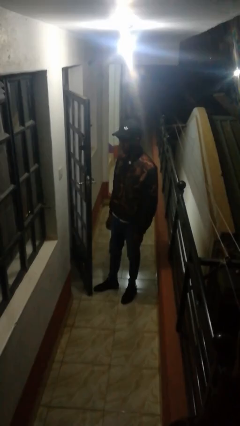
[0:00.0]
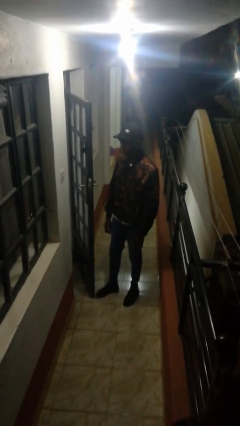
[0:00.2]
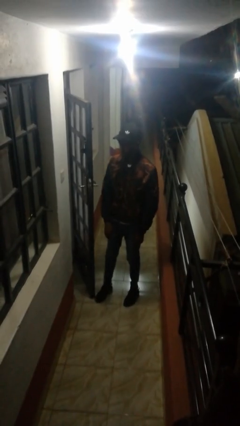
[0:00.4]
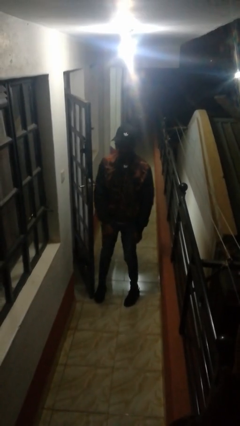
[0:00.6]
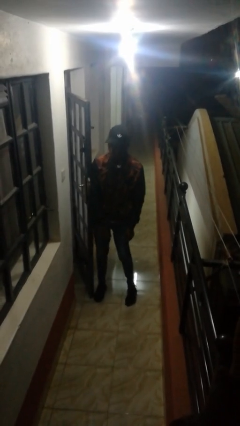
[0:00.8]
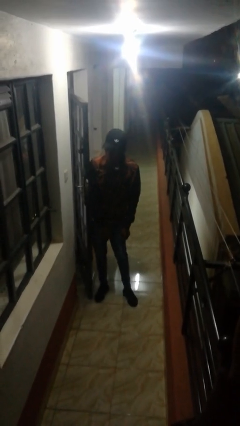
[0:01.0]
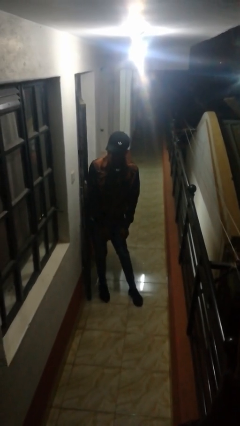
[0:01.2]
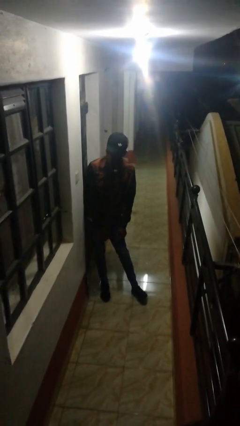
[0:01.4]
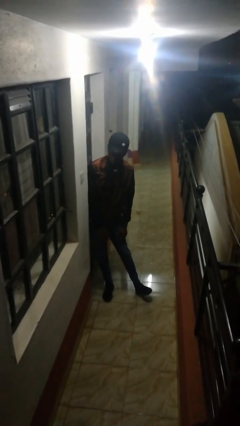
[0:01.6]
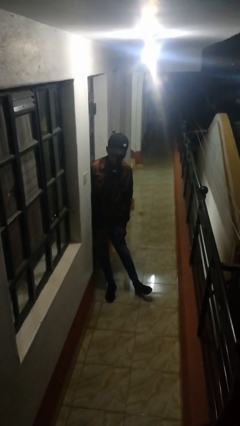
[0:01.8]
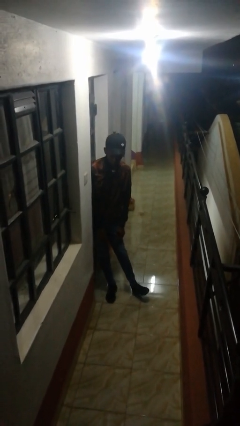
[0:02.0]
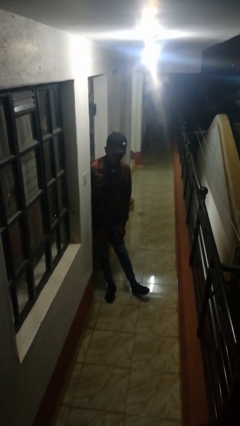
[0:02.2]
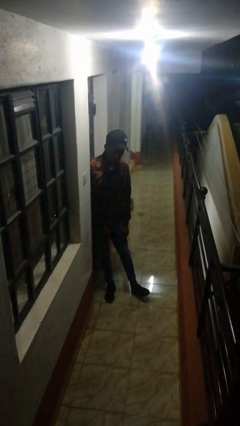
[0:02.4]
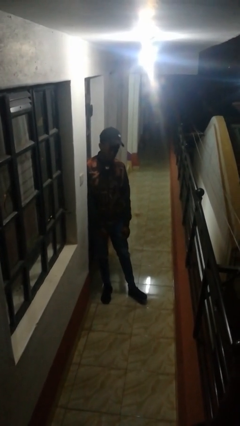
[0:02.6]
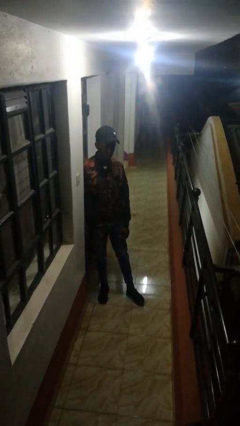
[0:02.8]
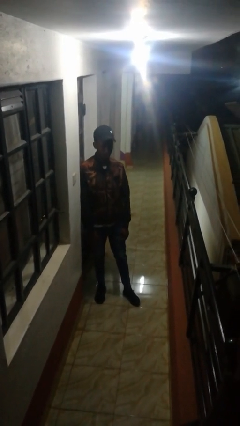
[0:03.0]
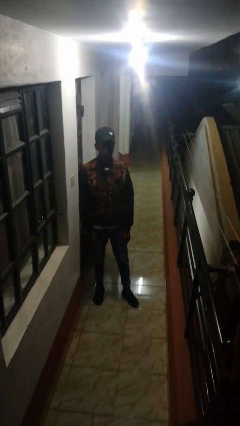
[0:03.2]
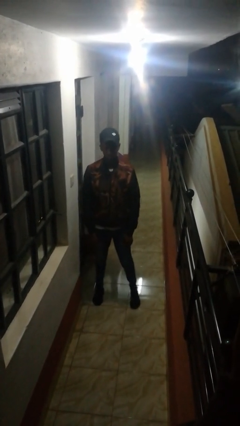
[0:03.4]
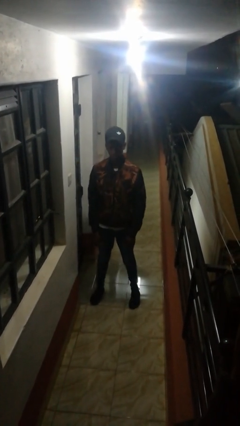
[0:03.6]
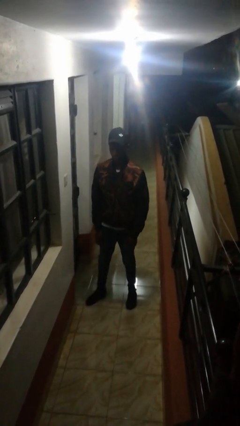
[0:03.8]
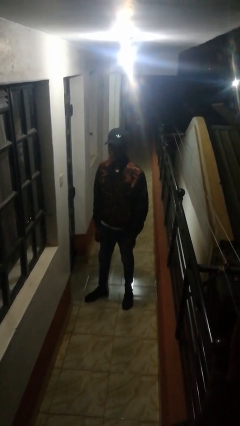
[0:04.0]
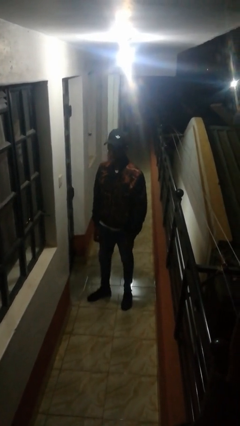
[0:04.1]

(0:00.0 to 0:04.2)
person closes door with hip

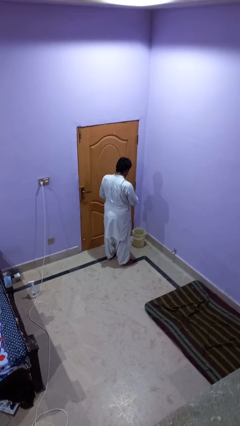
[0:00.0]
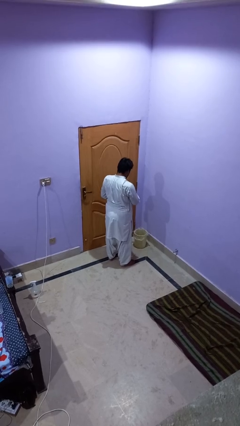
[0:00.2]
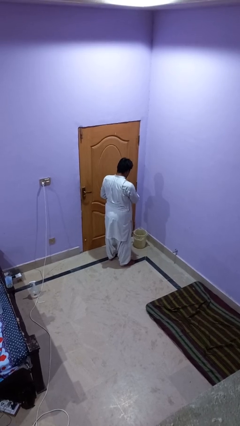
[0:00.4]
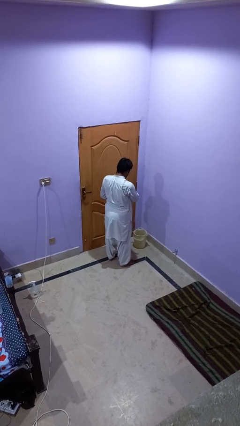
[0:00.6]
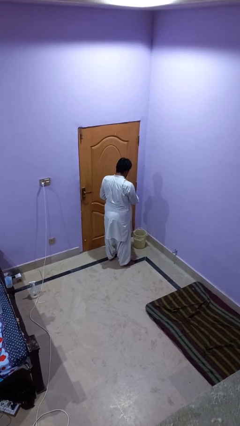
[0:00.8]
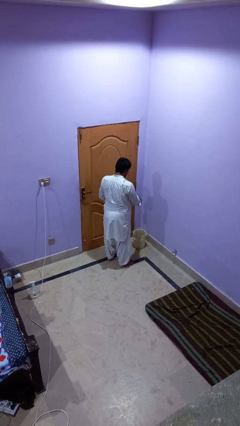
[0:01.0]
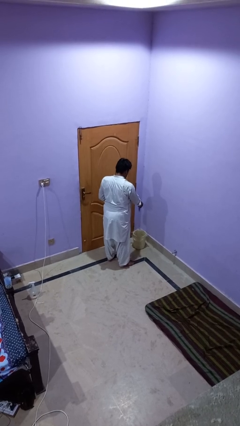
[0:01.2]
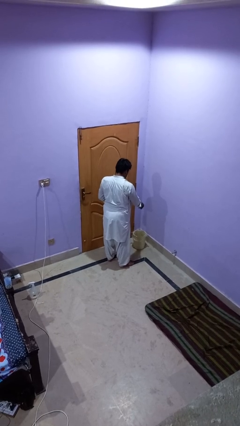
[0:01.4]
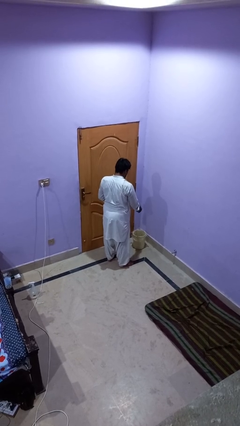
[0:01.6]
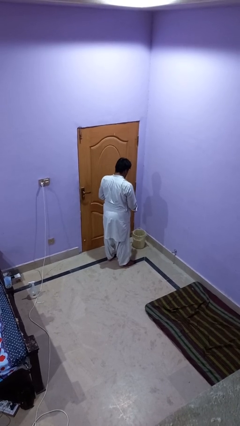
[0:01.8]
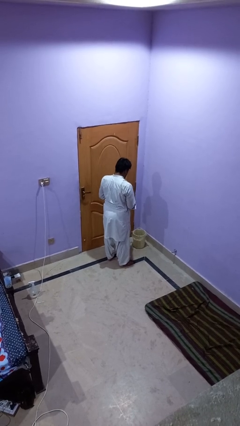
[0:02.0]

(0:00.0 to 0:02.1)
person discards trash

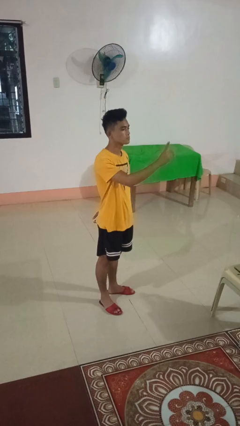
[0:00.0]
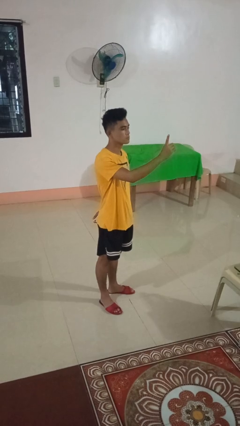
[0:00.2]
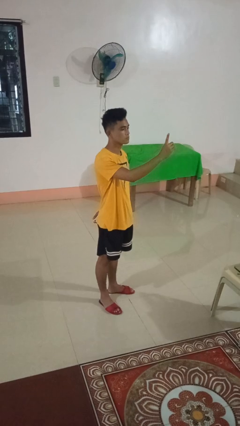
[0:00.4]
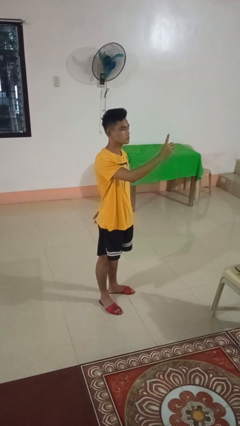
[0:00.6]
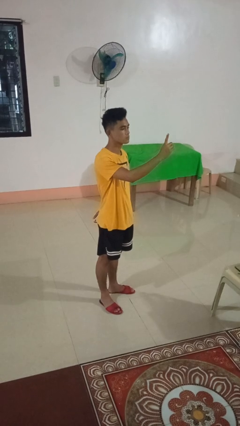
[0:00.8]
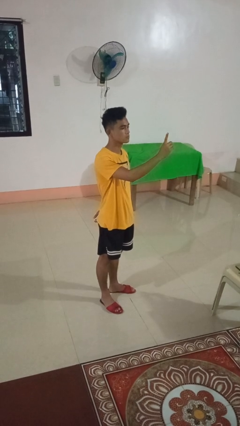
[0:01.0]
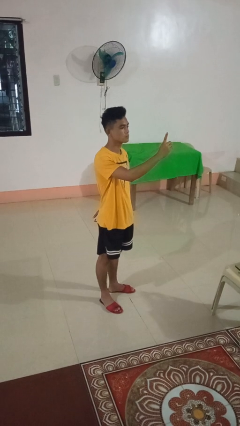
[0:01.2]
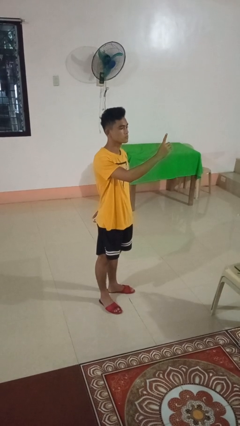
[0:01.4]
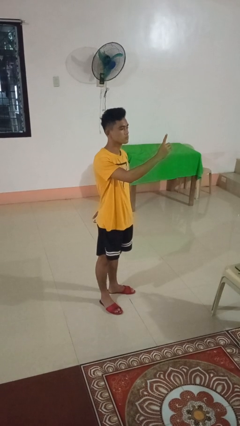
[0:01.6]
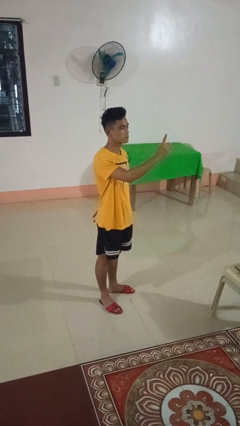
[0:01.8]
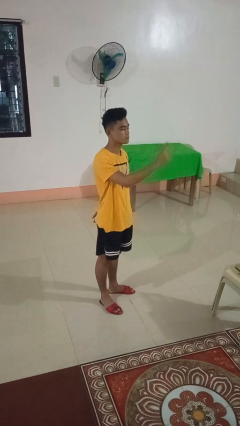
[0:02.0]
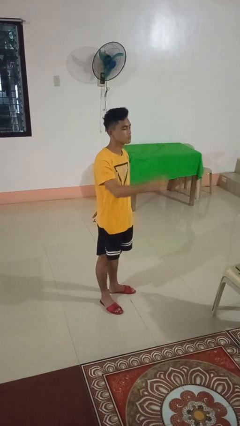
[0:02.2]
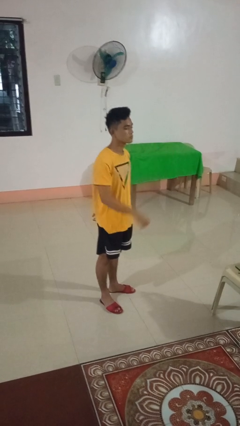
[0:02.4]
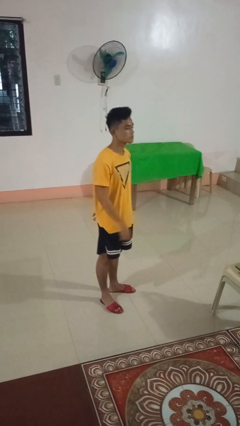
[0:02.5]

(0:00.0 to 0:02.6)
person gestures number one

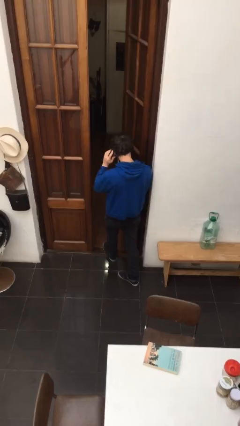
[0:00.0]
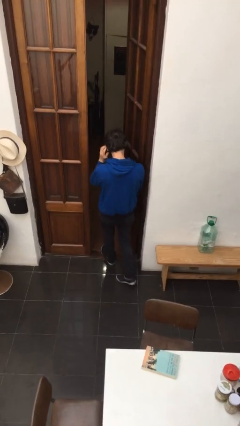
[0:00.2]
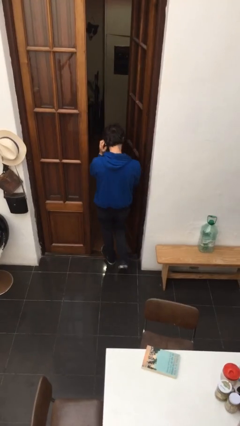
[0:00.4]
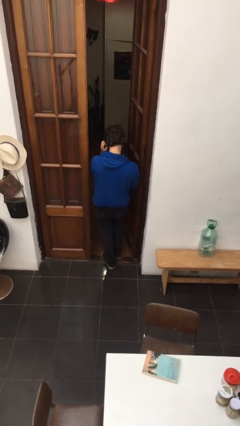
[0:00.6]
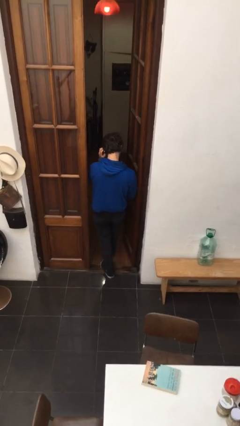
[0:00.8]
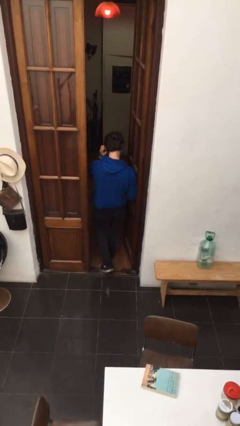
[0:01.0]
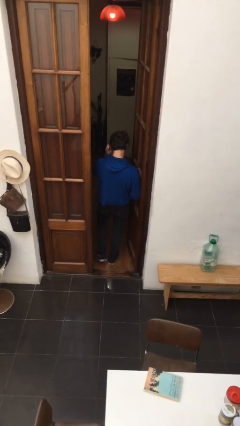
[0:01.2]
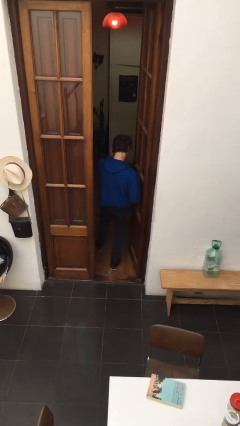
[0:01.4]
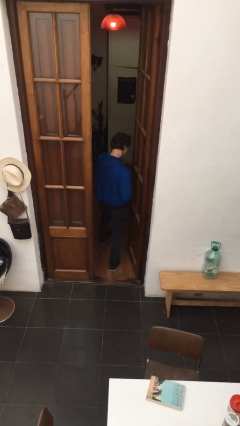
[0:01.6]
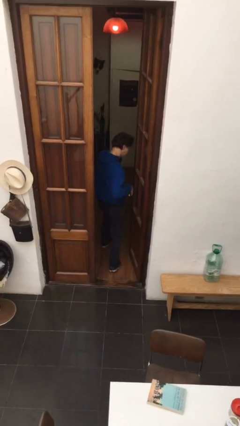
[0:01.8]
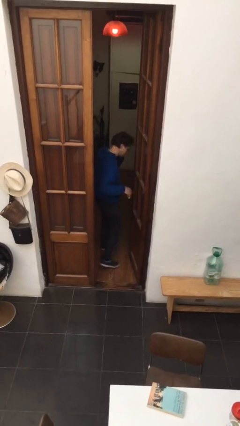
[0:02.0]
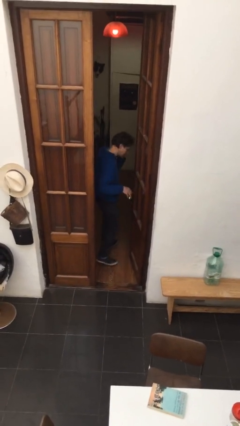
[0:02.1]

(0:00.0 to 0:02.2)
person exits scene through structure

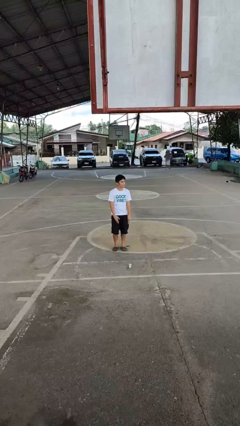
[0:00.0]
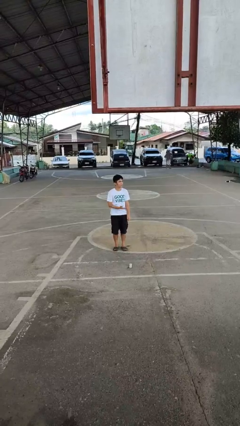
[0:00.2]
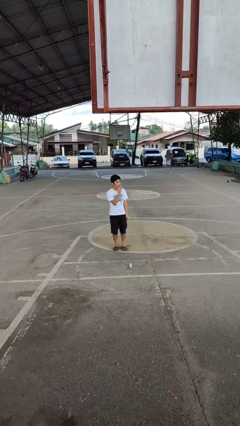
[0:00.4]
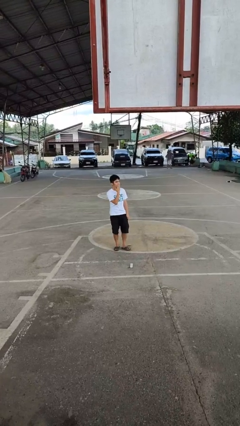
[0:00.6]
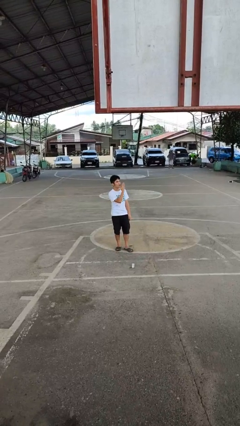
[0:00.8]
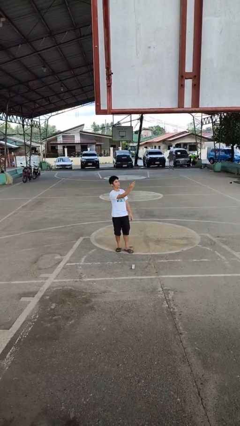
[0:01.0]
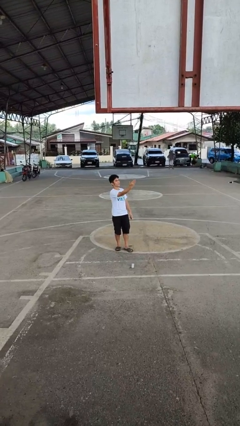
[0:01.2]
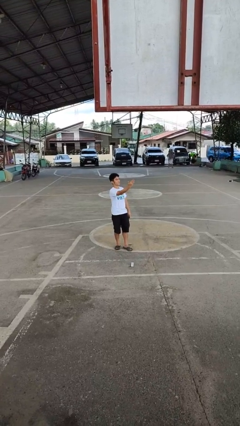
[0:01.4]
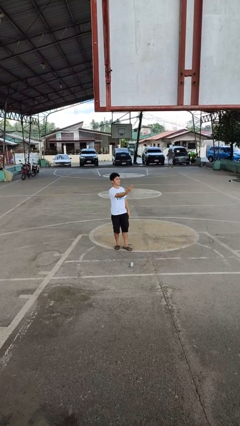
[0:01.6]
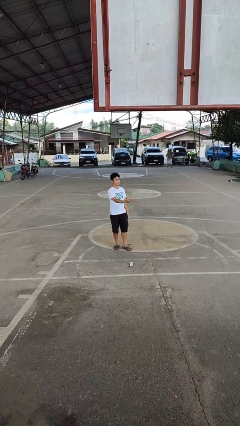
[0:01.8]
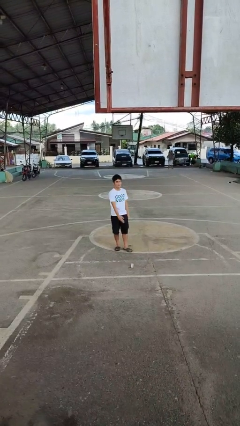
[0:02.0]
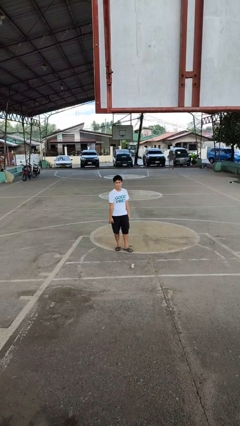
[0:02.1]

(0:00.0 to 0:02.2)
person gestures blow kiss

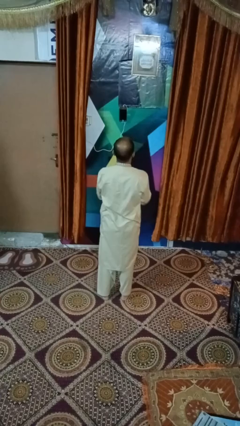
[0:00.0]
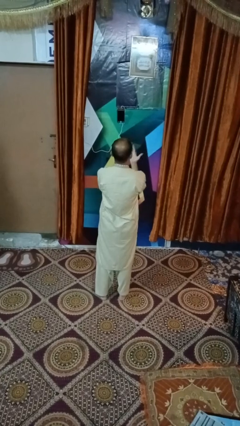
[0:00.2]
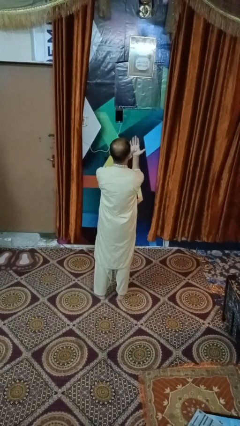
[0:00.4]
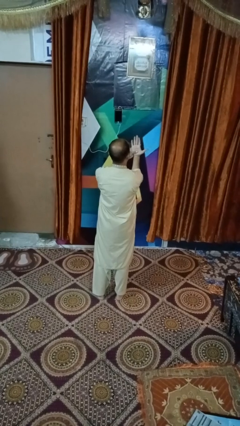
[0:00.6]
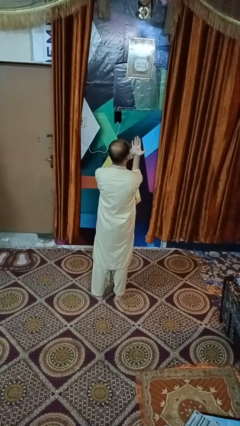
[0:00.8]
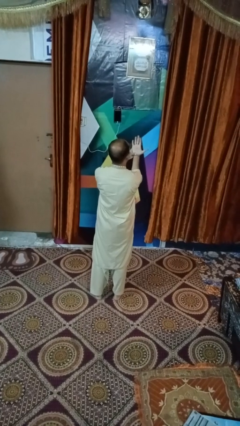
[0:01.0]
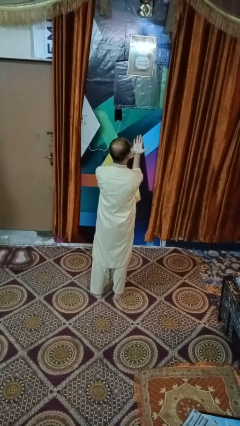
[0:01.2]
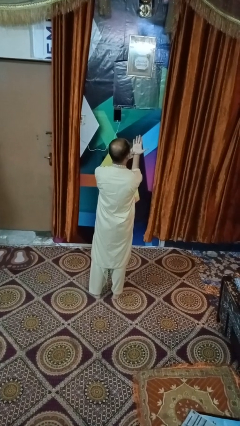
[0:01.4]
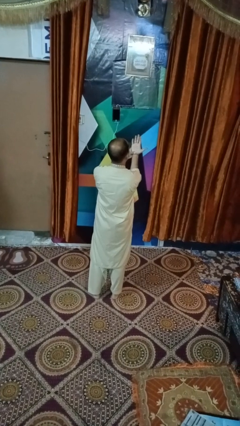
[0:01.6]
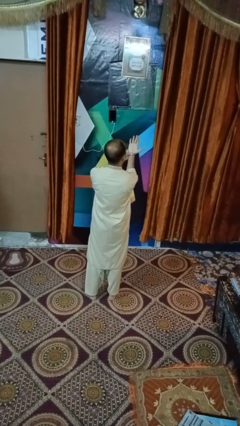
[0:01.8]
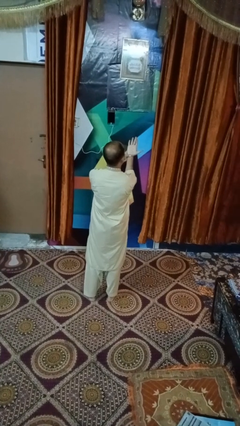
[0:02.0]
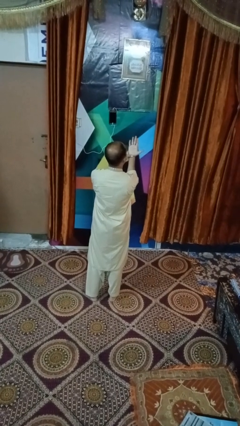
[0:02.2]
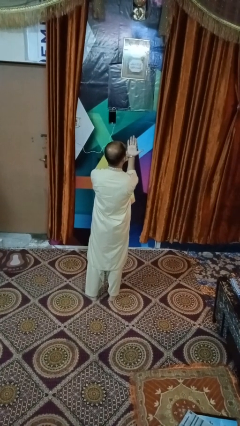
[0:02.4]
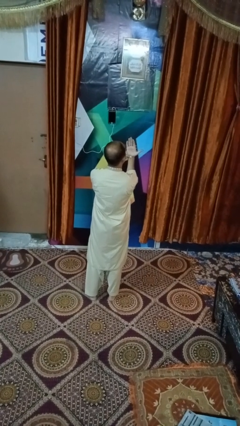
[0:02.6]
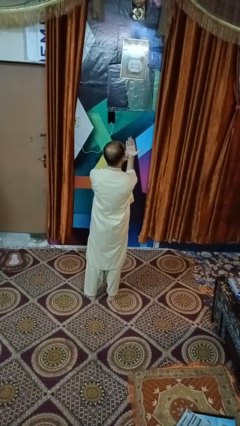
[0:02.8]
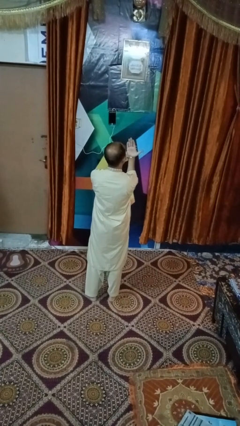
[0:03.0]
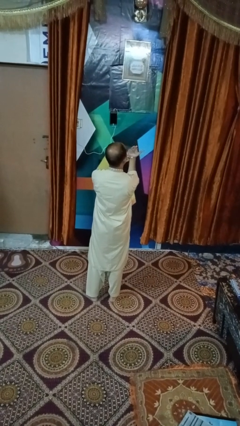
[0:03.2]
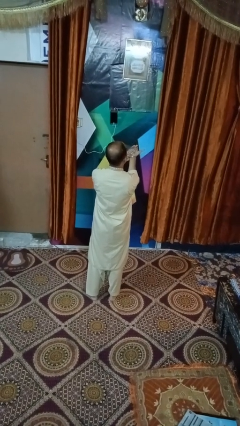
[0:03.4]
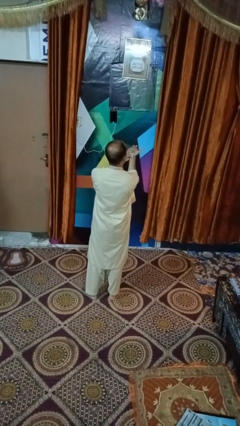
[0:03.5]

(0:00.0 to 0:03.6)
person looks at hands in lap

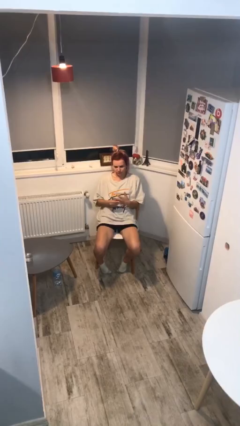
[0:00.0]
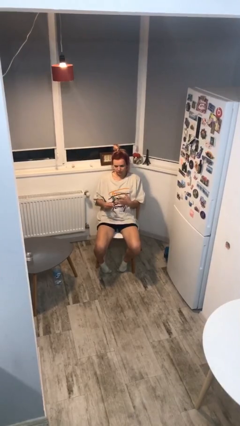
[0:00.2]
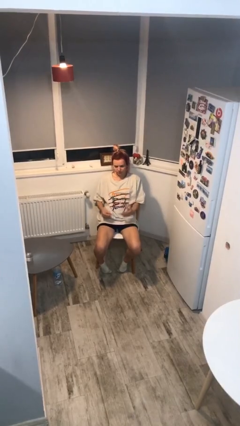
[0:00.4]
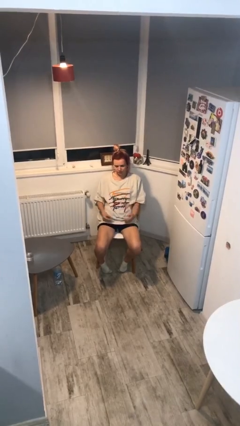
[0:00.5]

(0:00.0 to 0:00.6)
person takes off ring

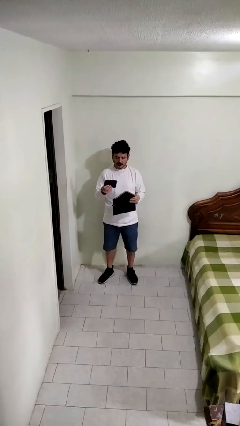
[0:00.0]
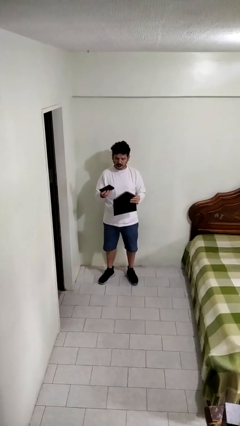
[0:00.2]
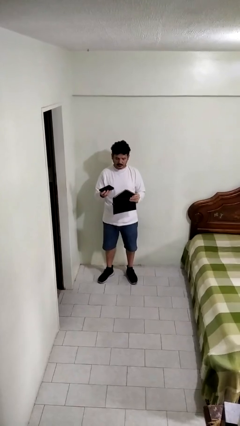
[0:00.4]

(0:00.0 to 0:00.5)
person takes object from purse
